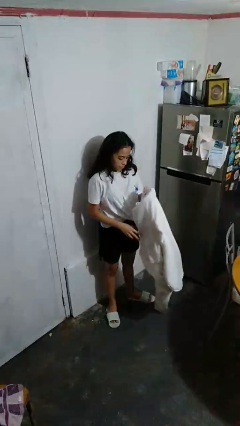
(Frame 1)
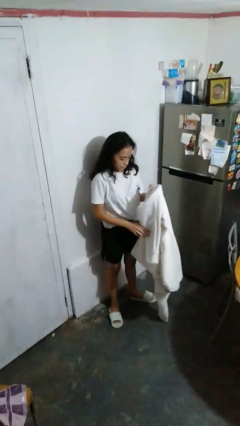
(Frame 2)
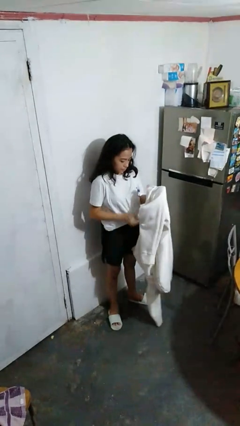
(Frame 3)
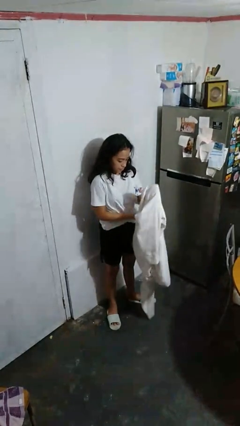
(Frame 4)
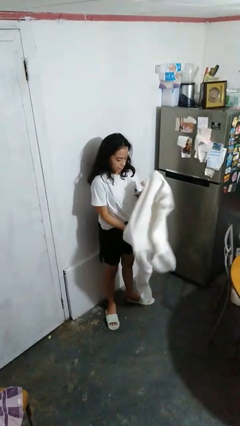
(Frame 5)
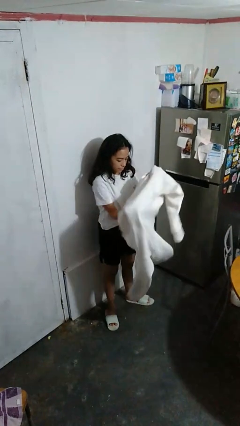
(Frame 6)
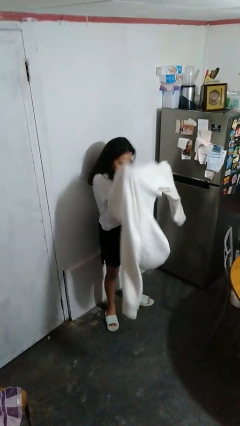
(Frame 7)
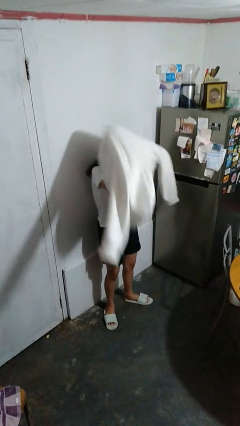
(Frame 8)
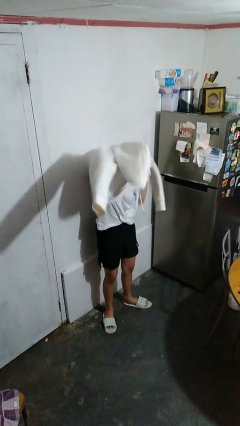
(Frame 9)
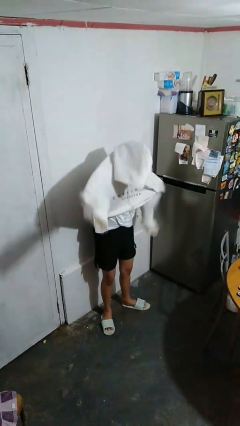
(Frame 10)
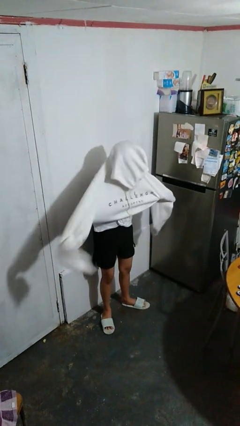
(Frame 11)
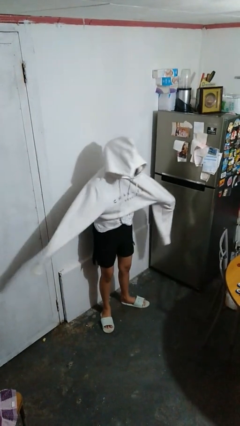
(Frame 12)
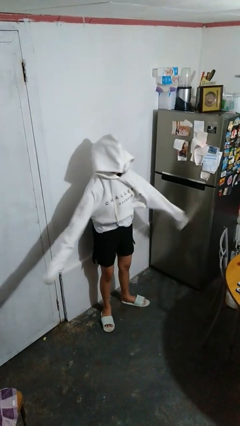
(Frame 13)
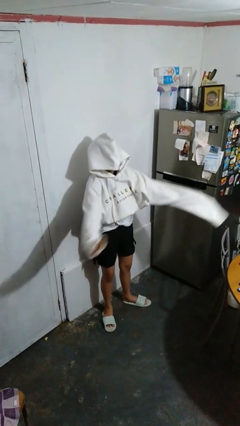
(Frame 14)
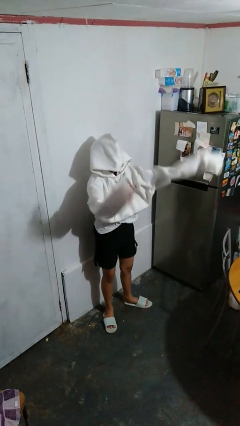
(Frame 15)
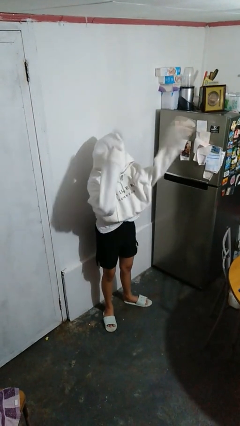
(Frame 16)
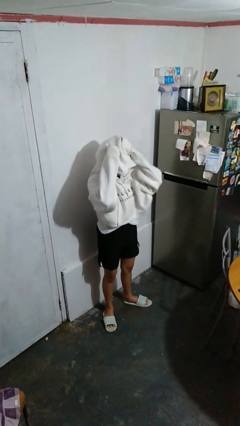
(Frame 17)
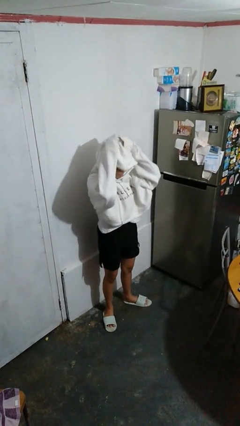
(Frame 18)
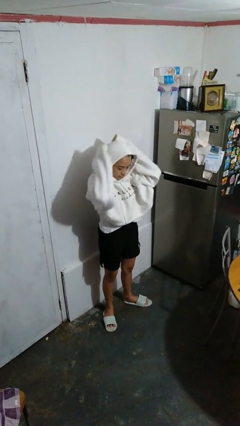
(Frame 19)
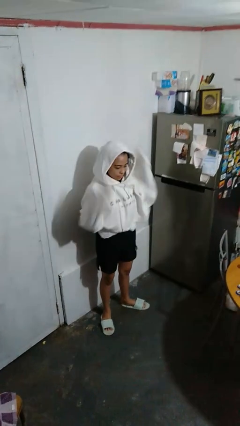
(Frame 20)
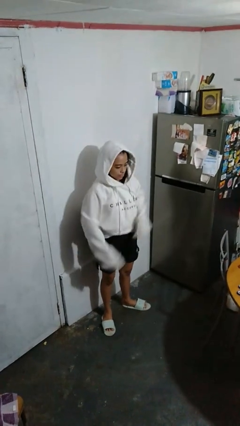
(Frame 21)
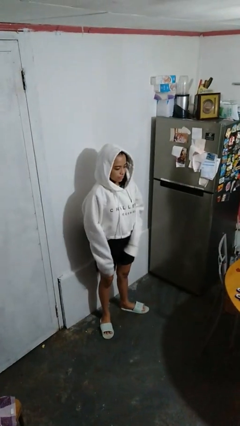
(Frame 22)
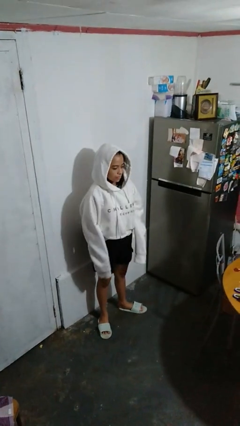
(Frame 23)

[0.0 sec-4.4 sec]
person puts on hoodie

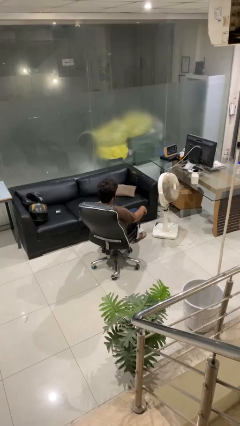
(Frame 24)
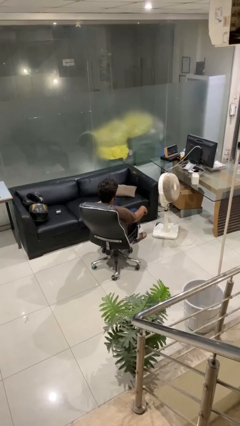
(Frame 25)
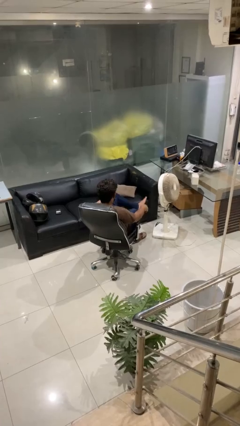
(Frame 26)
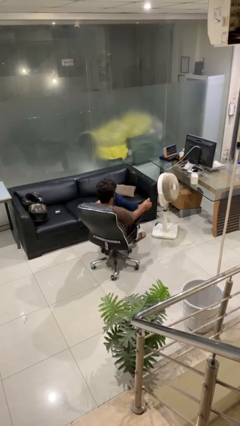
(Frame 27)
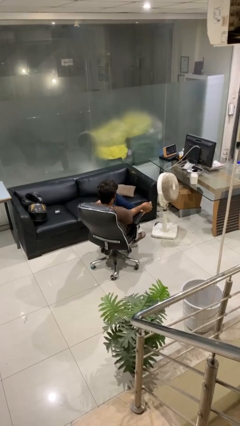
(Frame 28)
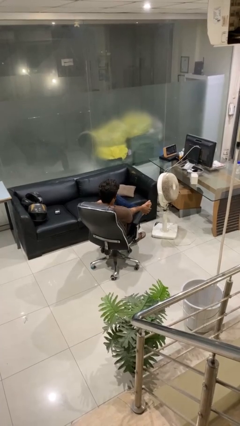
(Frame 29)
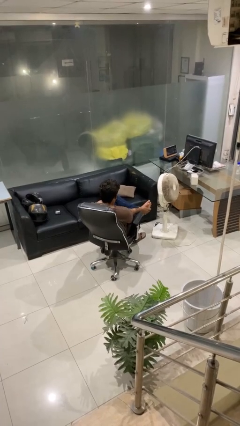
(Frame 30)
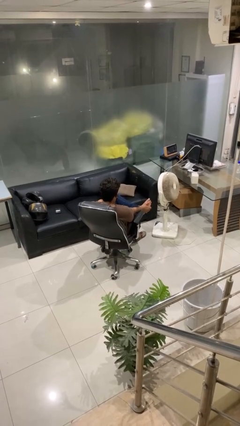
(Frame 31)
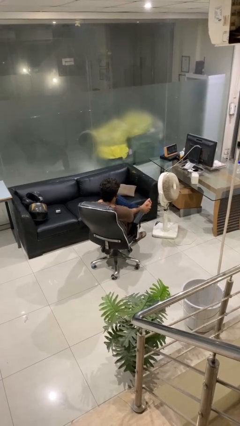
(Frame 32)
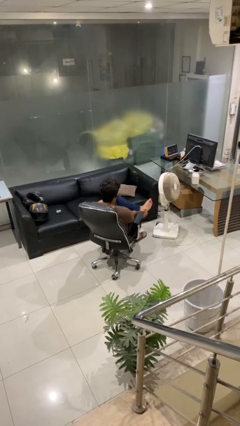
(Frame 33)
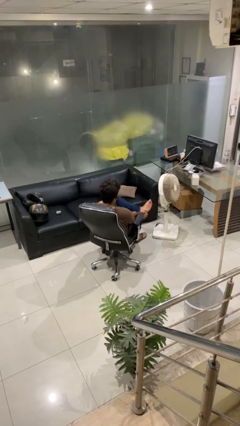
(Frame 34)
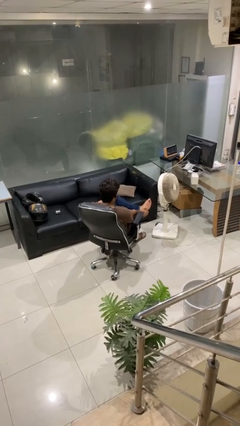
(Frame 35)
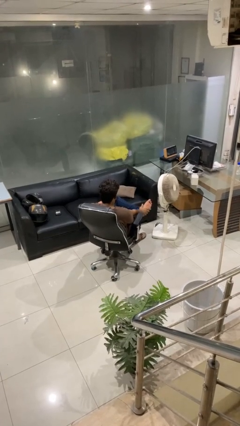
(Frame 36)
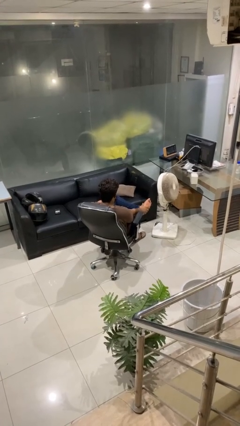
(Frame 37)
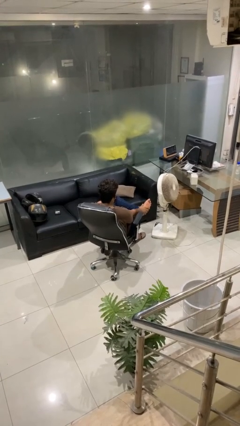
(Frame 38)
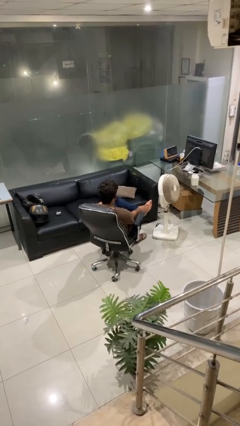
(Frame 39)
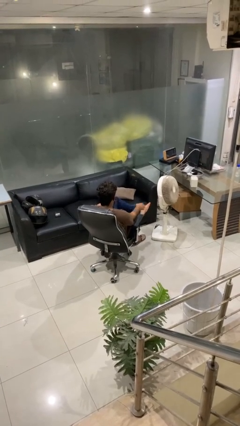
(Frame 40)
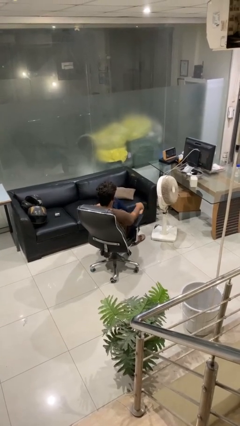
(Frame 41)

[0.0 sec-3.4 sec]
person rubs foot

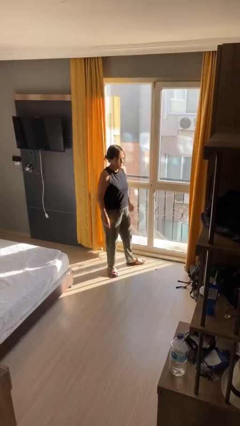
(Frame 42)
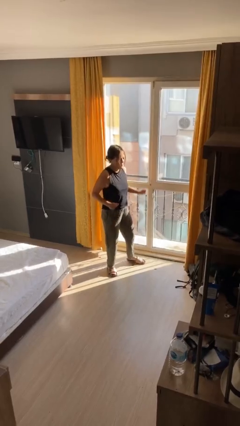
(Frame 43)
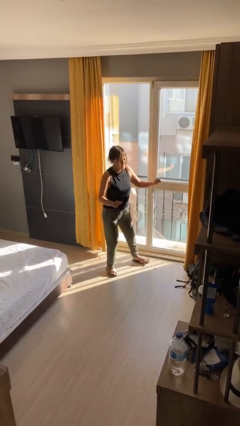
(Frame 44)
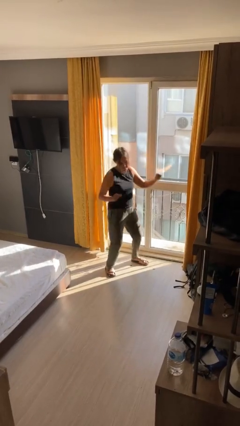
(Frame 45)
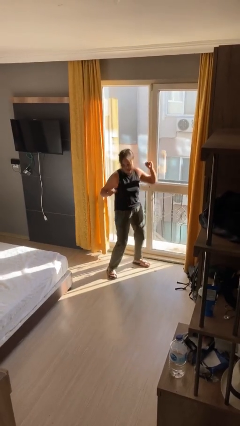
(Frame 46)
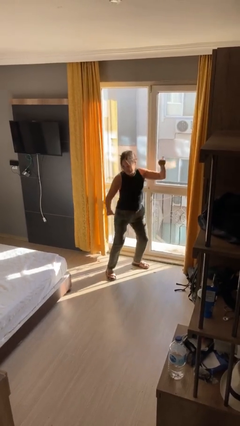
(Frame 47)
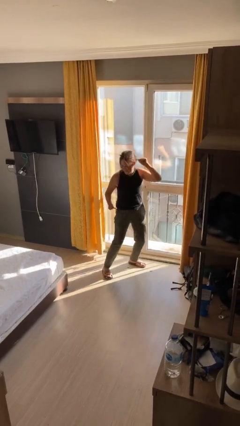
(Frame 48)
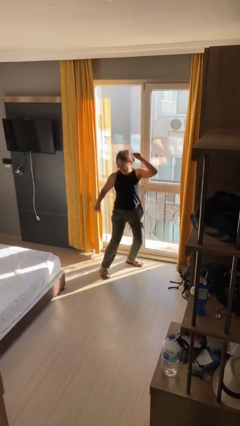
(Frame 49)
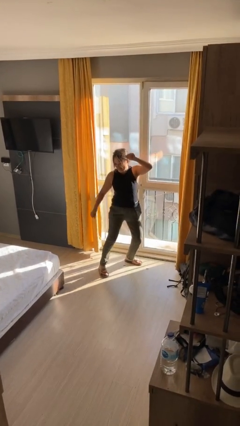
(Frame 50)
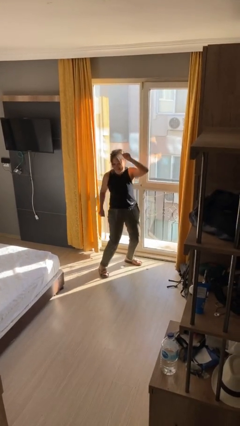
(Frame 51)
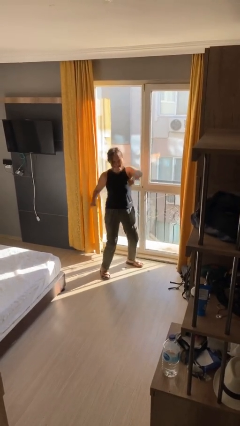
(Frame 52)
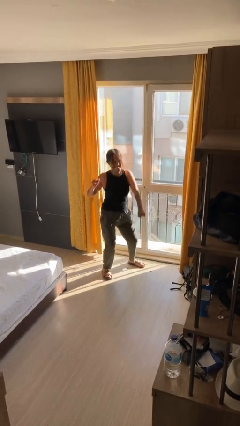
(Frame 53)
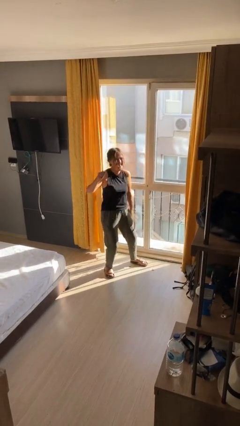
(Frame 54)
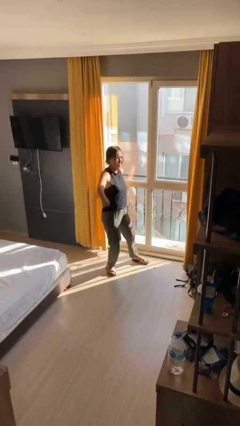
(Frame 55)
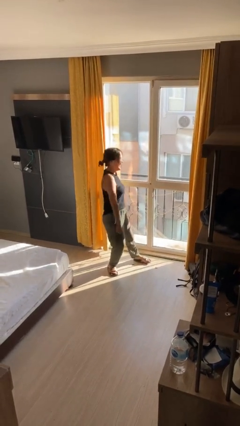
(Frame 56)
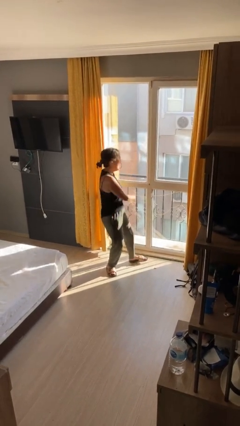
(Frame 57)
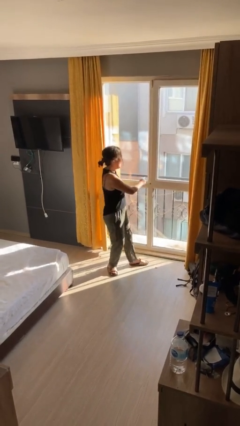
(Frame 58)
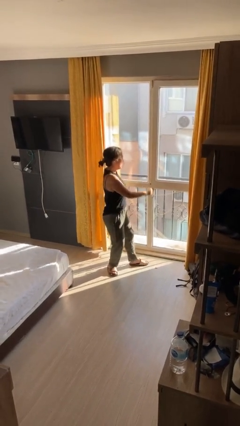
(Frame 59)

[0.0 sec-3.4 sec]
person dances in place

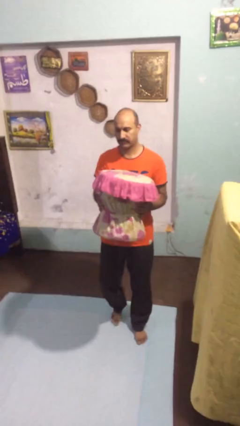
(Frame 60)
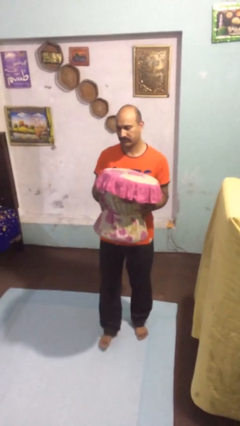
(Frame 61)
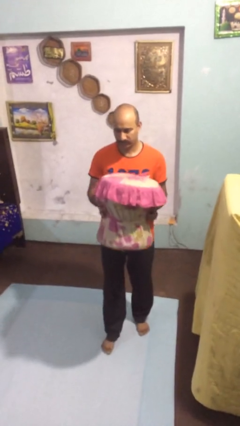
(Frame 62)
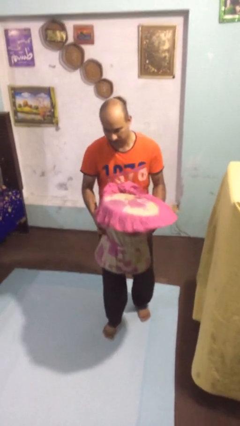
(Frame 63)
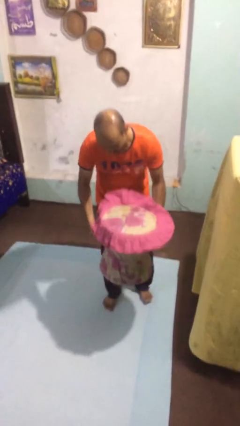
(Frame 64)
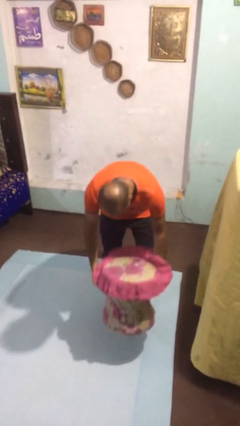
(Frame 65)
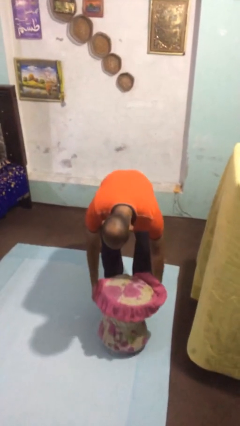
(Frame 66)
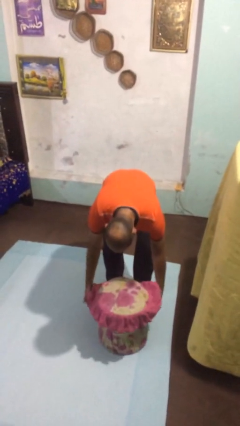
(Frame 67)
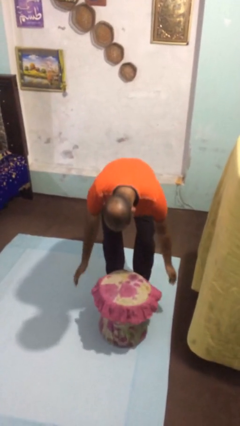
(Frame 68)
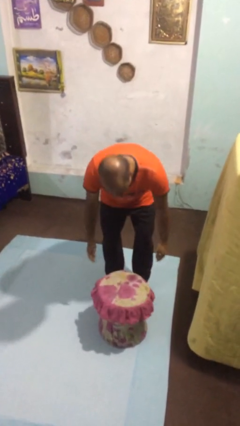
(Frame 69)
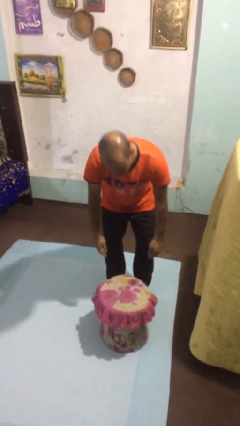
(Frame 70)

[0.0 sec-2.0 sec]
person puts down object on floor

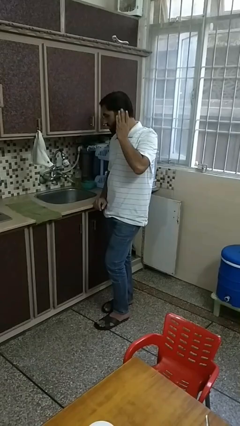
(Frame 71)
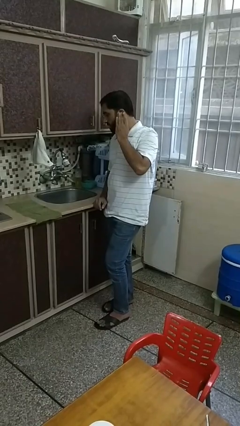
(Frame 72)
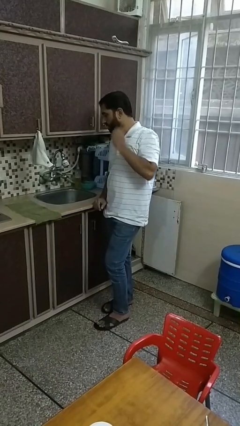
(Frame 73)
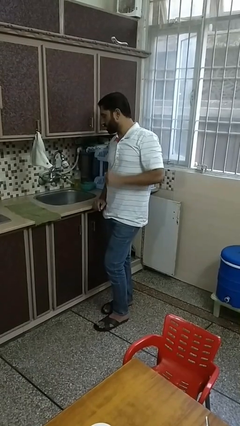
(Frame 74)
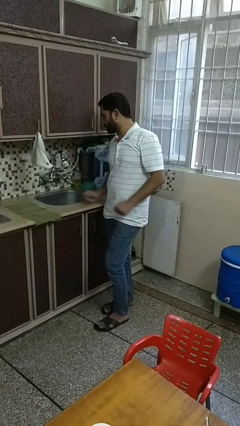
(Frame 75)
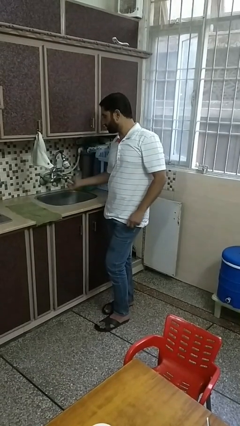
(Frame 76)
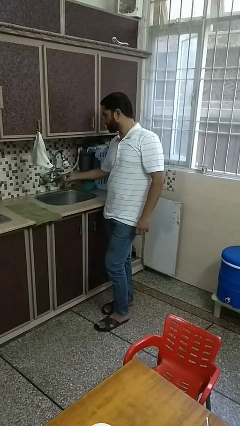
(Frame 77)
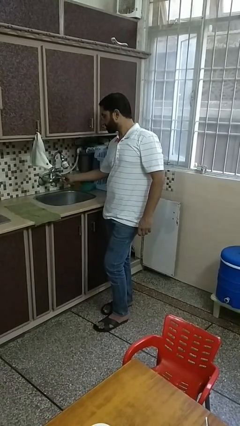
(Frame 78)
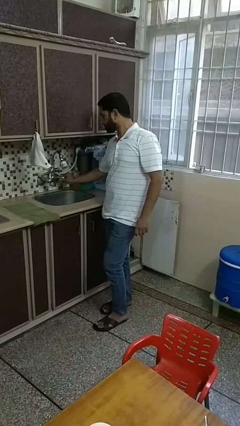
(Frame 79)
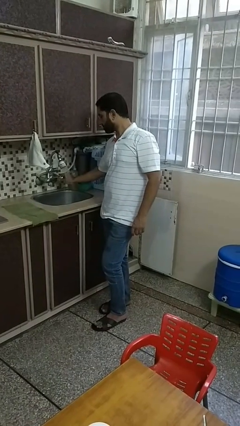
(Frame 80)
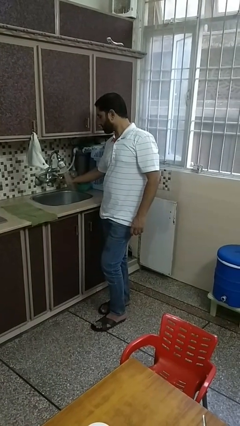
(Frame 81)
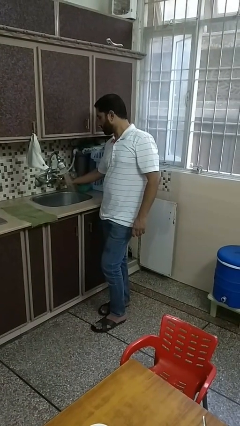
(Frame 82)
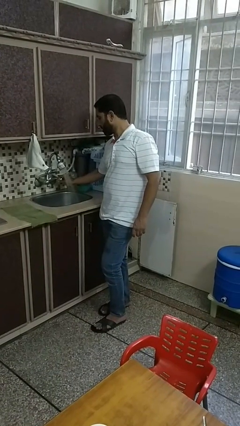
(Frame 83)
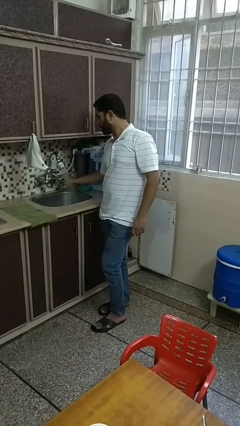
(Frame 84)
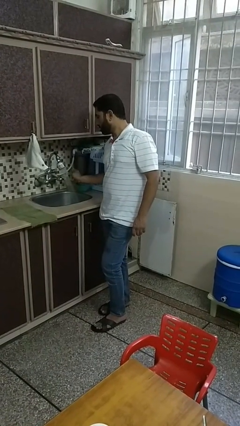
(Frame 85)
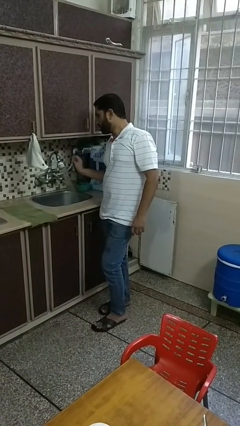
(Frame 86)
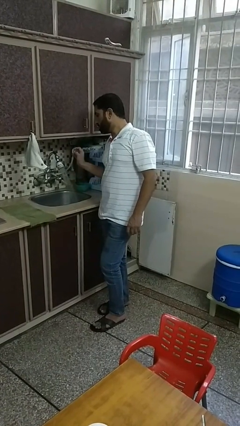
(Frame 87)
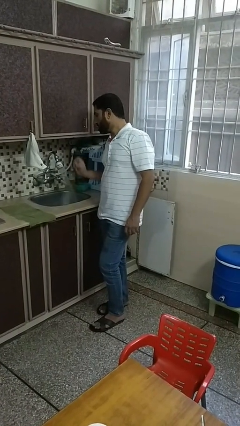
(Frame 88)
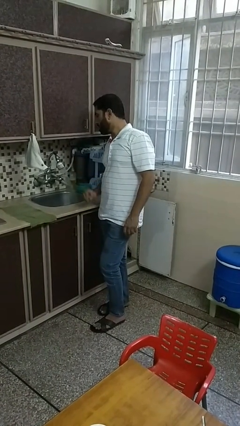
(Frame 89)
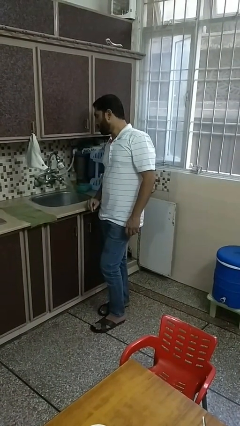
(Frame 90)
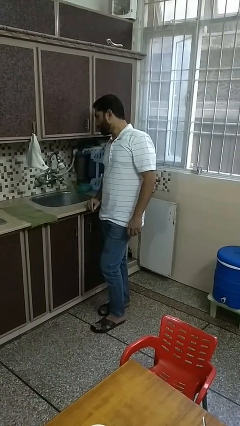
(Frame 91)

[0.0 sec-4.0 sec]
person turns on faucet

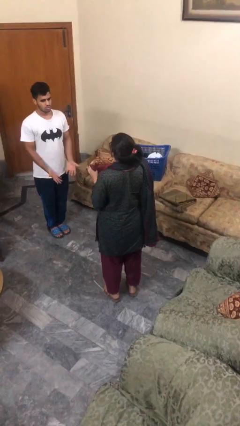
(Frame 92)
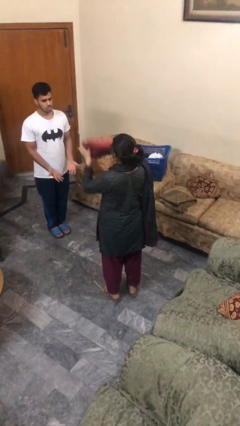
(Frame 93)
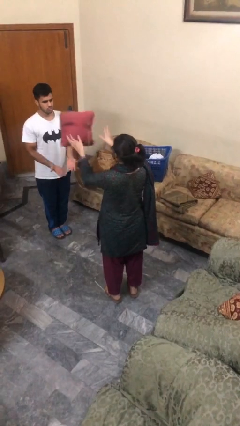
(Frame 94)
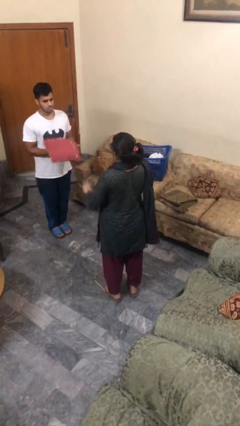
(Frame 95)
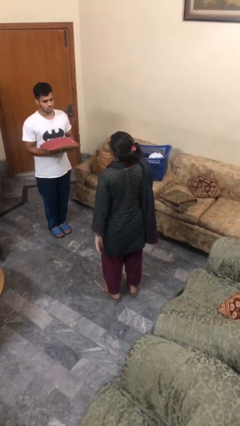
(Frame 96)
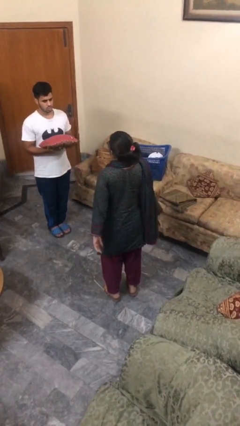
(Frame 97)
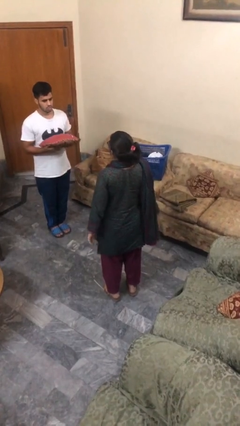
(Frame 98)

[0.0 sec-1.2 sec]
person throws object to person
